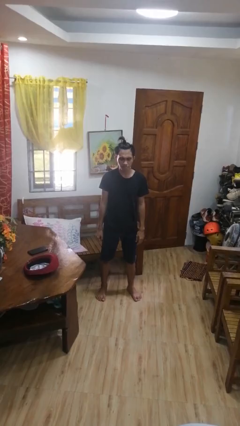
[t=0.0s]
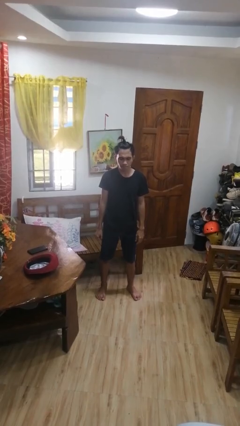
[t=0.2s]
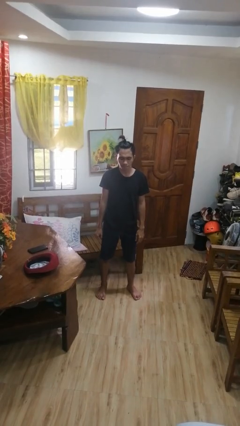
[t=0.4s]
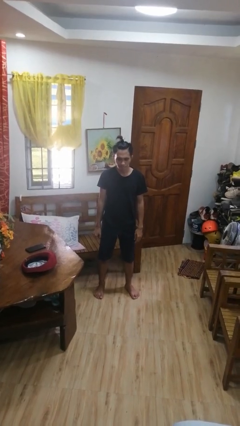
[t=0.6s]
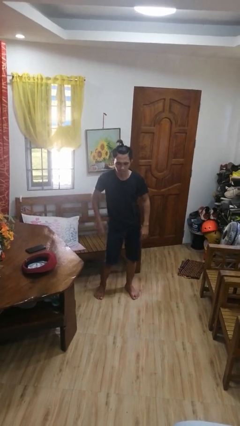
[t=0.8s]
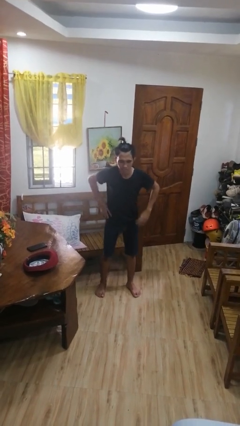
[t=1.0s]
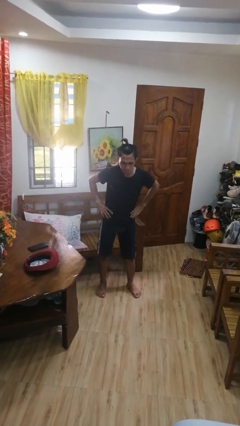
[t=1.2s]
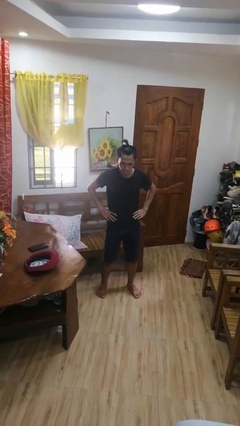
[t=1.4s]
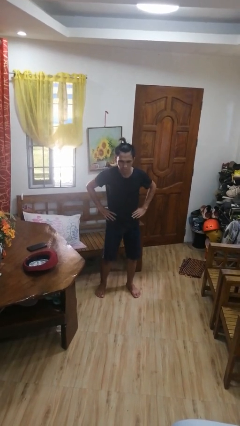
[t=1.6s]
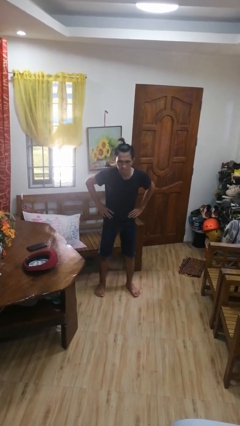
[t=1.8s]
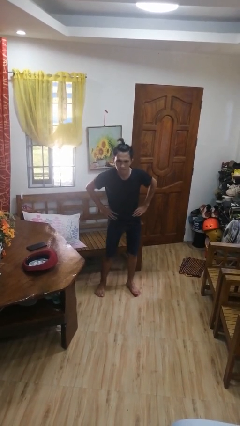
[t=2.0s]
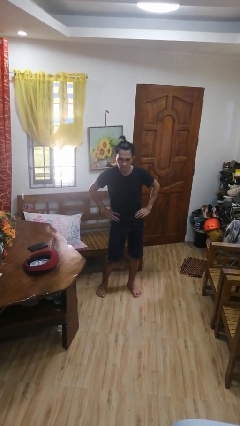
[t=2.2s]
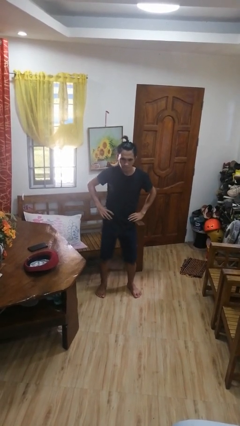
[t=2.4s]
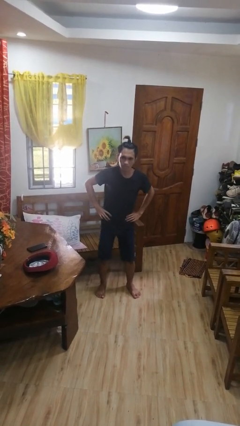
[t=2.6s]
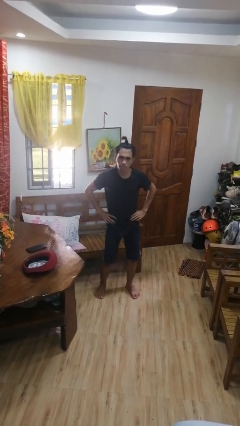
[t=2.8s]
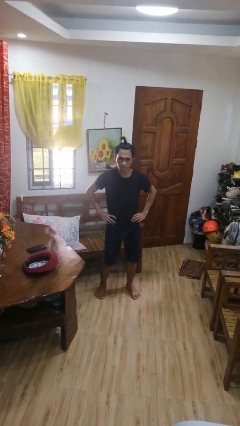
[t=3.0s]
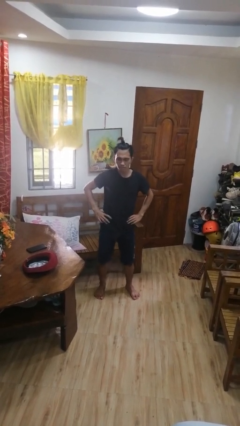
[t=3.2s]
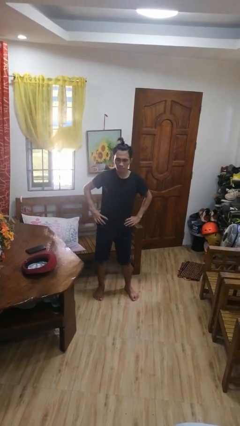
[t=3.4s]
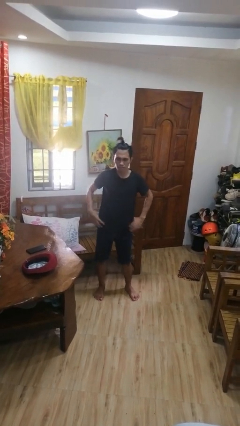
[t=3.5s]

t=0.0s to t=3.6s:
person wiggles hips

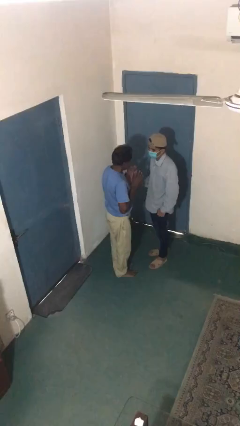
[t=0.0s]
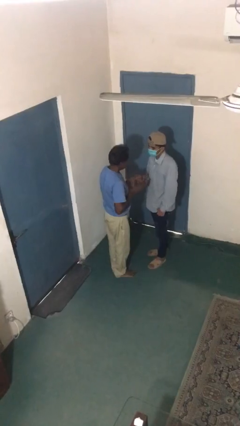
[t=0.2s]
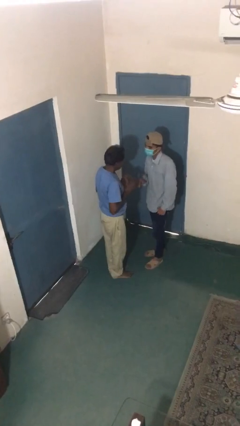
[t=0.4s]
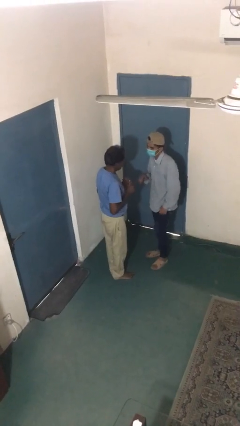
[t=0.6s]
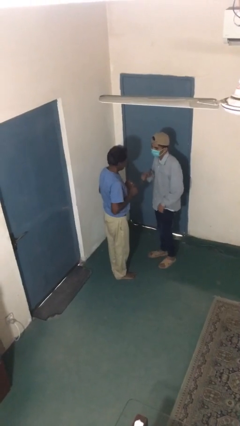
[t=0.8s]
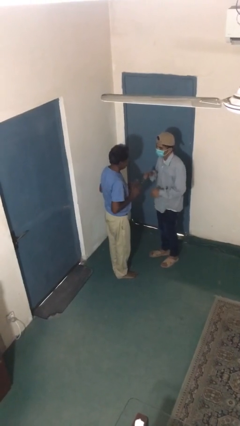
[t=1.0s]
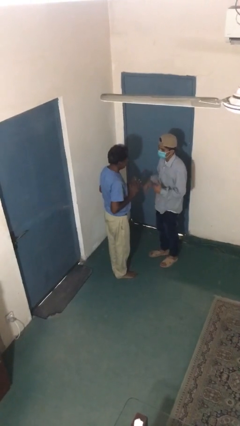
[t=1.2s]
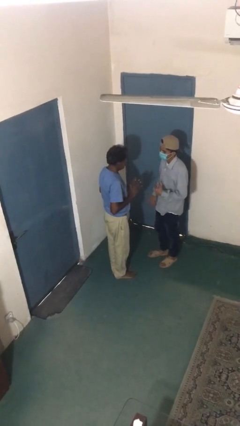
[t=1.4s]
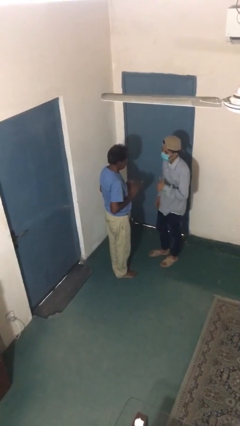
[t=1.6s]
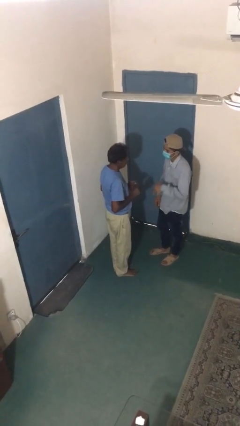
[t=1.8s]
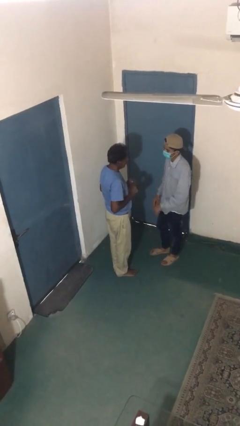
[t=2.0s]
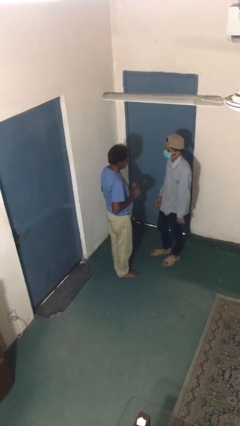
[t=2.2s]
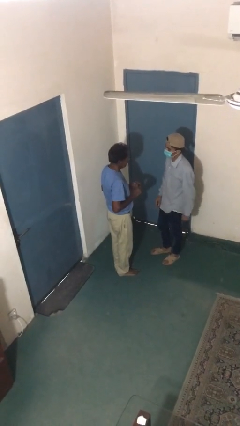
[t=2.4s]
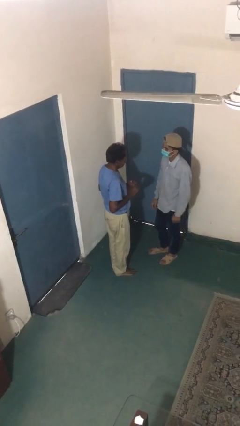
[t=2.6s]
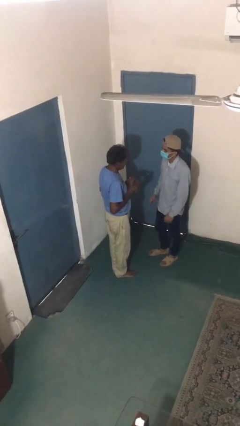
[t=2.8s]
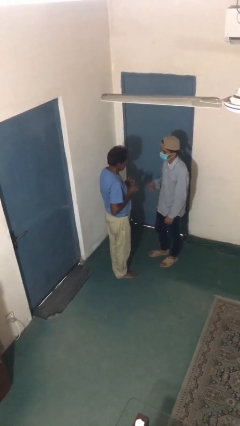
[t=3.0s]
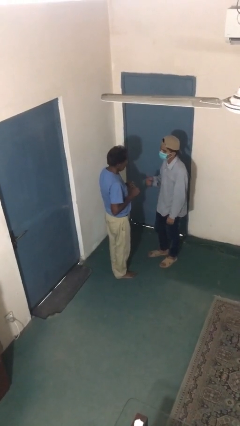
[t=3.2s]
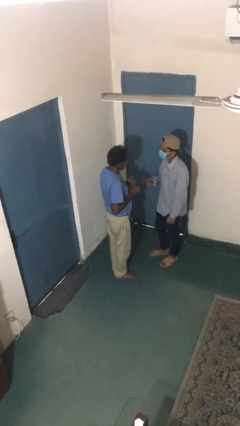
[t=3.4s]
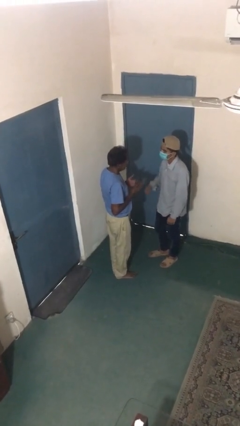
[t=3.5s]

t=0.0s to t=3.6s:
person talks to person

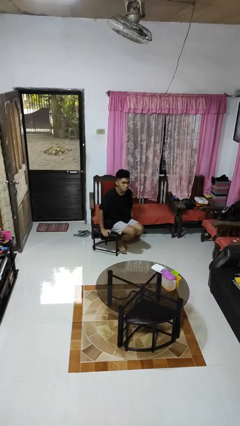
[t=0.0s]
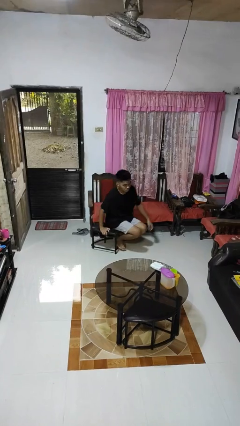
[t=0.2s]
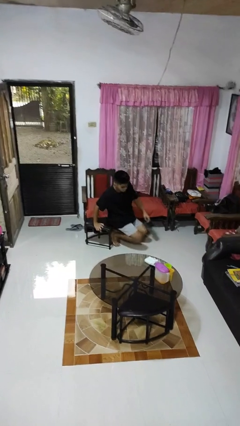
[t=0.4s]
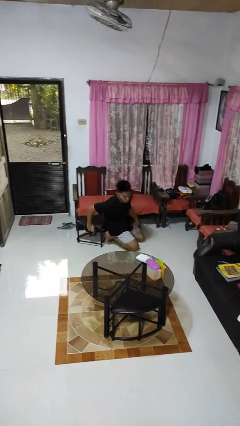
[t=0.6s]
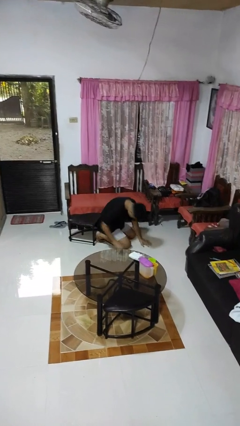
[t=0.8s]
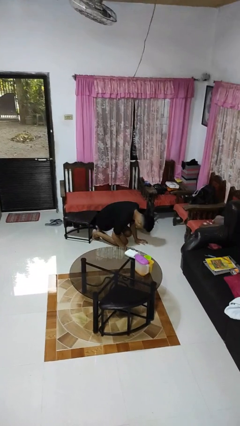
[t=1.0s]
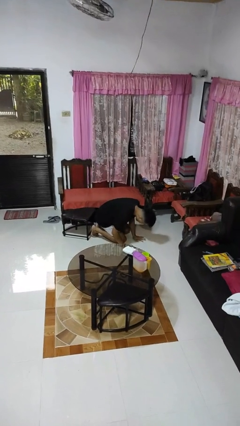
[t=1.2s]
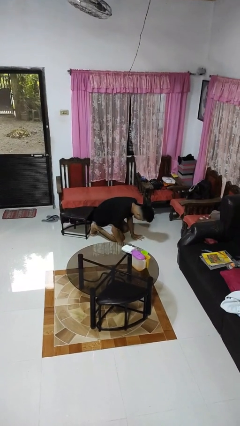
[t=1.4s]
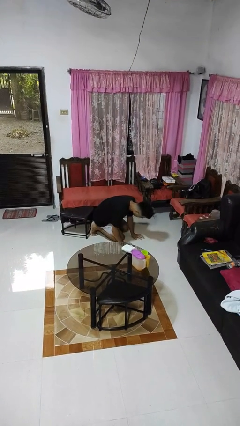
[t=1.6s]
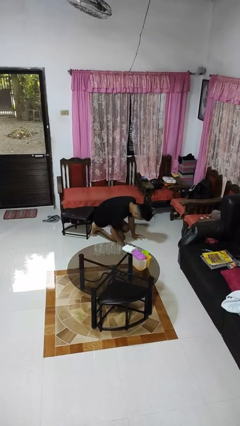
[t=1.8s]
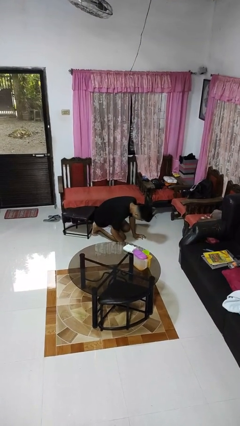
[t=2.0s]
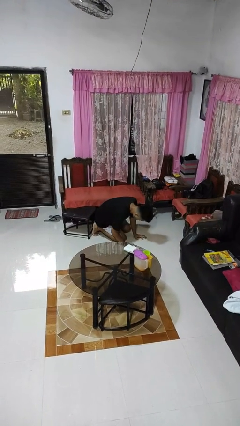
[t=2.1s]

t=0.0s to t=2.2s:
person falls from chair

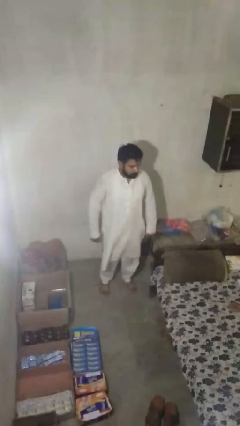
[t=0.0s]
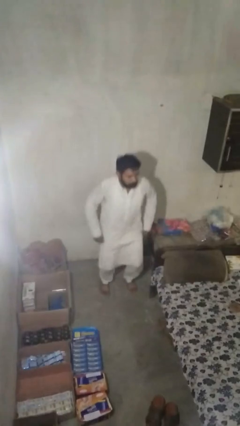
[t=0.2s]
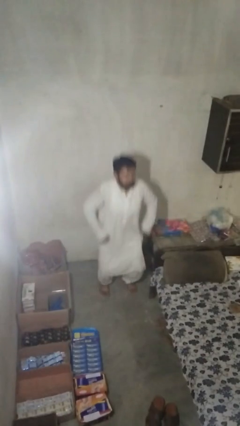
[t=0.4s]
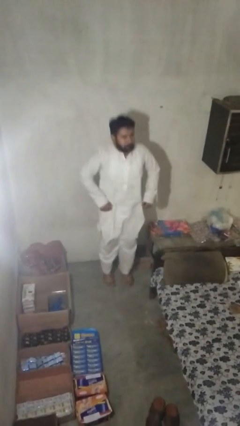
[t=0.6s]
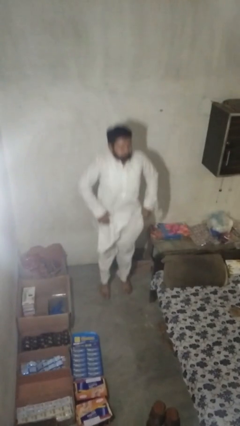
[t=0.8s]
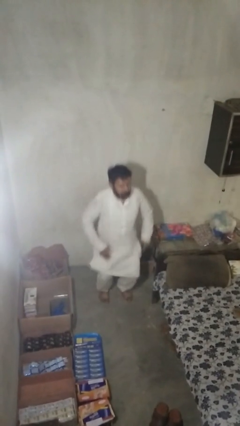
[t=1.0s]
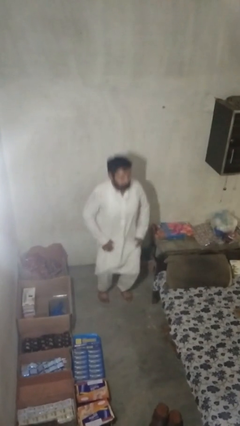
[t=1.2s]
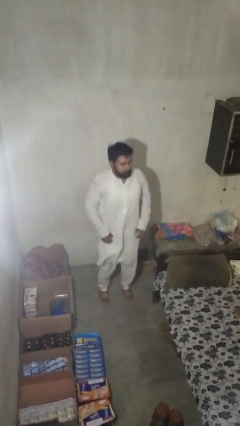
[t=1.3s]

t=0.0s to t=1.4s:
person jumps

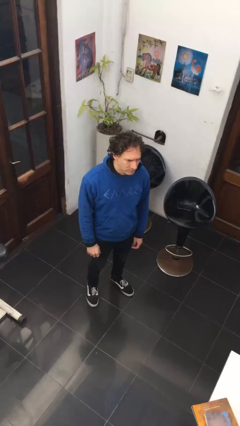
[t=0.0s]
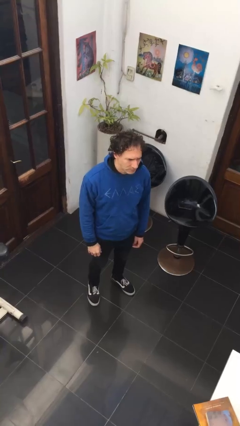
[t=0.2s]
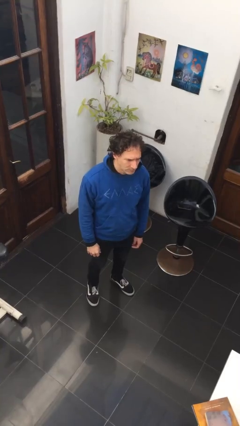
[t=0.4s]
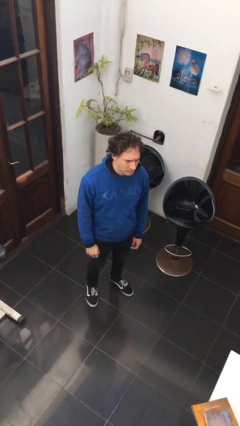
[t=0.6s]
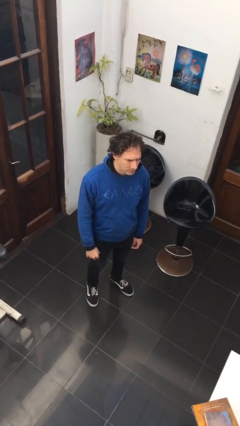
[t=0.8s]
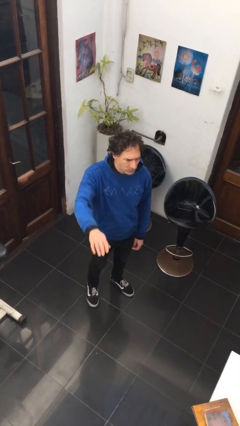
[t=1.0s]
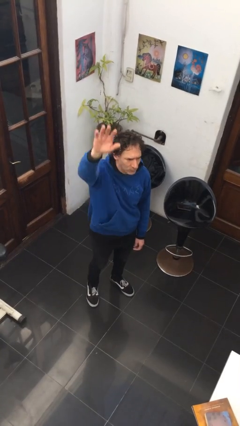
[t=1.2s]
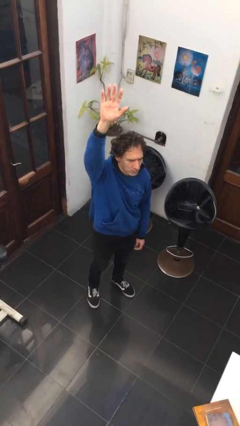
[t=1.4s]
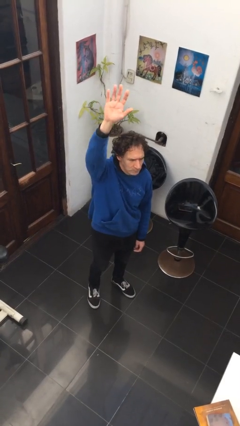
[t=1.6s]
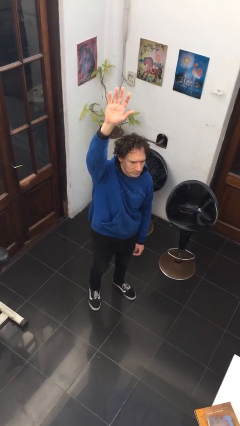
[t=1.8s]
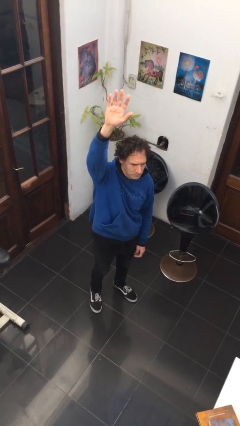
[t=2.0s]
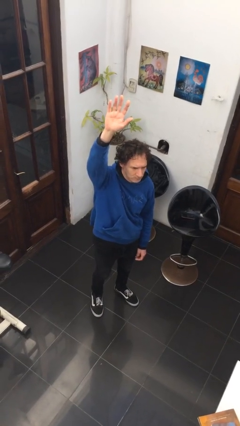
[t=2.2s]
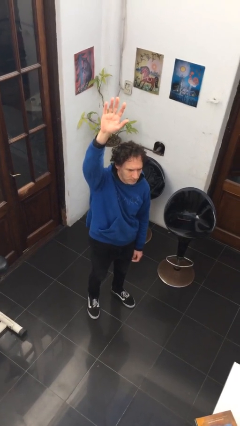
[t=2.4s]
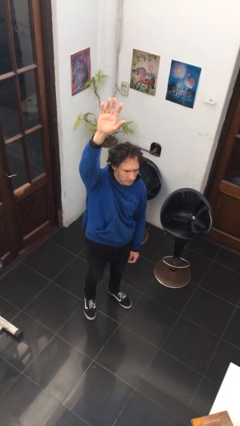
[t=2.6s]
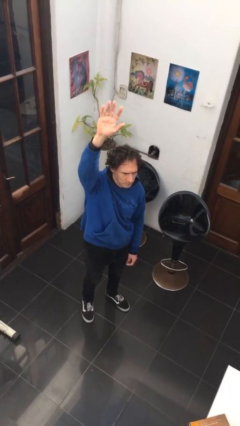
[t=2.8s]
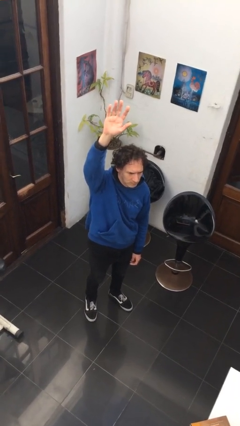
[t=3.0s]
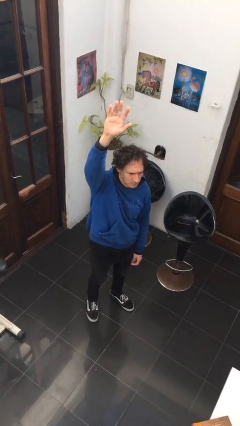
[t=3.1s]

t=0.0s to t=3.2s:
person gestures raise hand

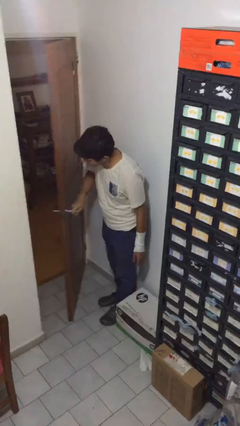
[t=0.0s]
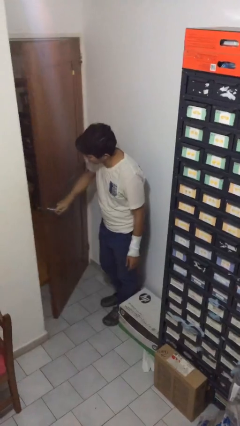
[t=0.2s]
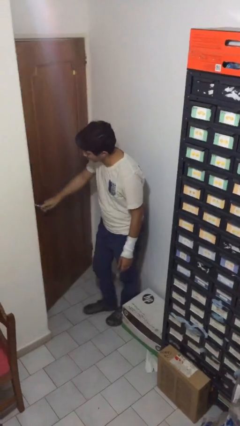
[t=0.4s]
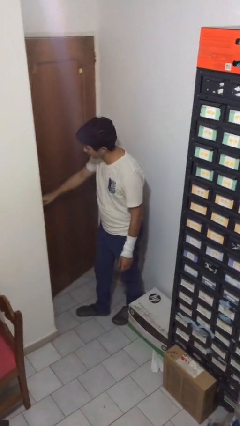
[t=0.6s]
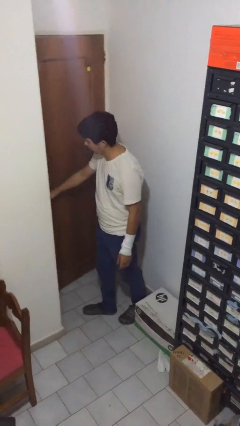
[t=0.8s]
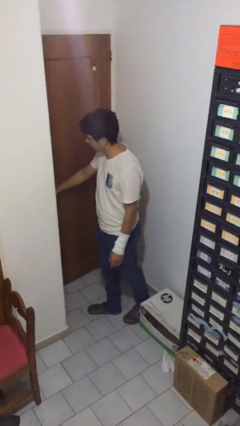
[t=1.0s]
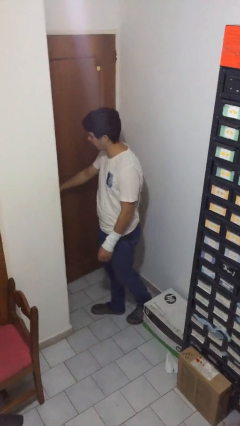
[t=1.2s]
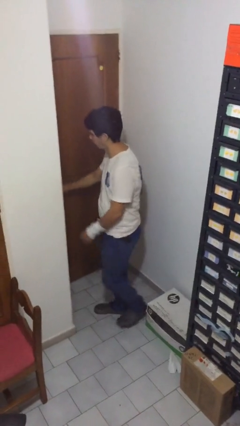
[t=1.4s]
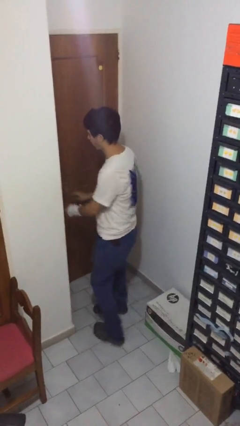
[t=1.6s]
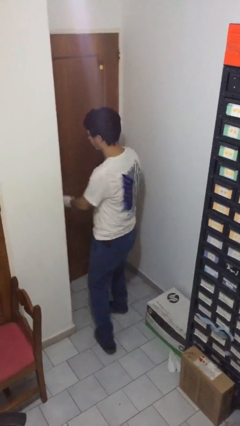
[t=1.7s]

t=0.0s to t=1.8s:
person closes facility door

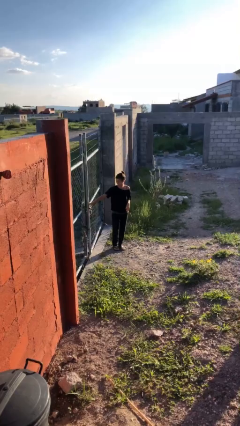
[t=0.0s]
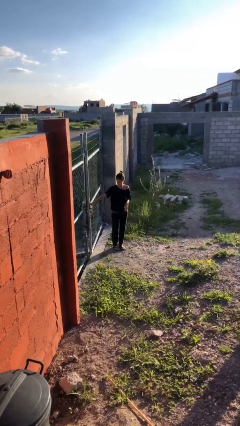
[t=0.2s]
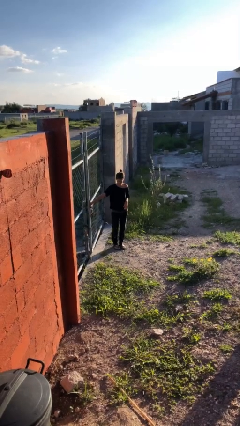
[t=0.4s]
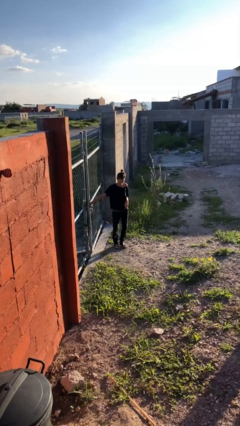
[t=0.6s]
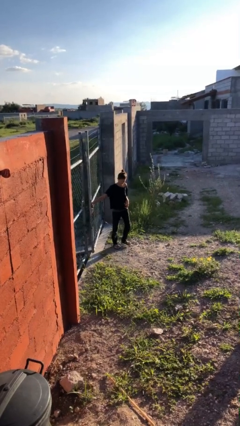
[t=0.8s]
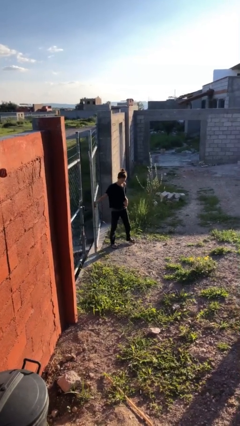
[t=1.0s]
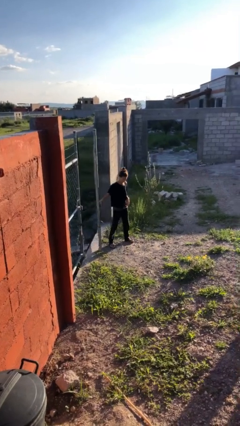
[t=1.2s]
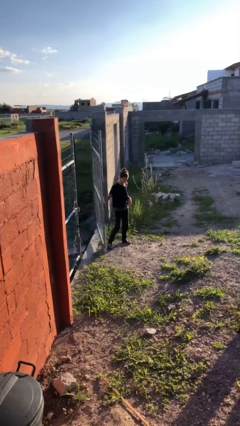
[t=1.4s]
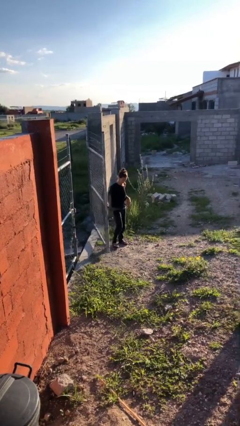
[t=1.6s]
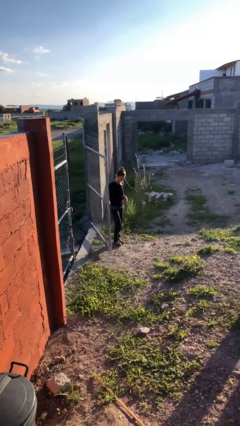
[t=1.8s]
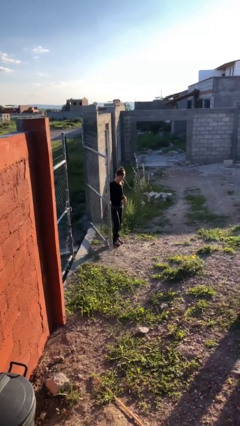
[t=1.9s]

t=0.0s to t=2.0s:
person opens gate
